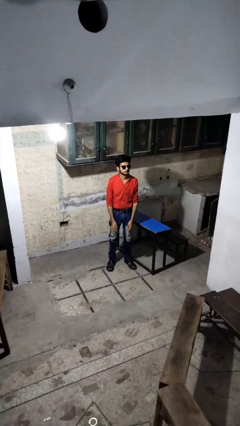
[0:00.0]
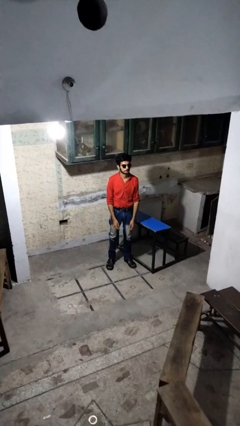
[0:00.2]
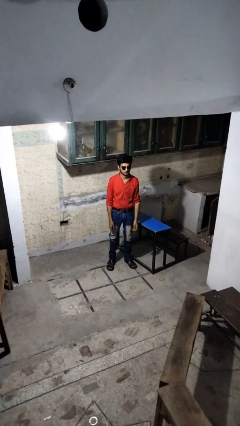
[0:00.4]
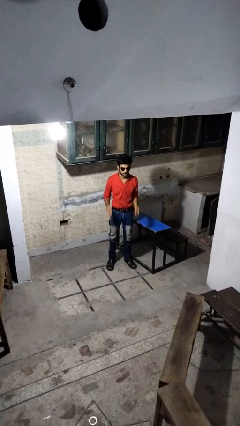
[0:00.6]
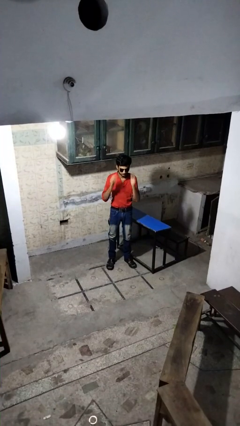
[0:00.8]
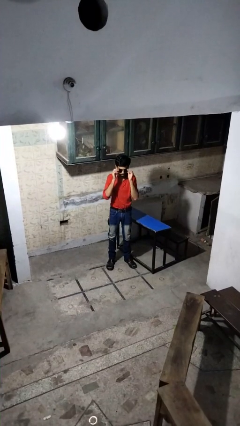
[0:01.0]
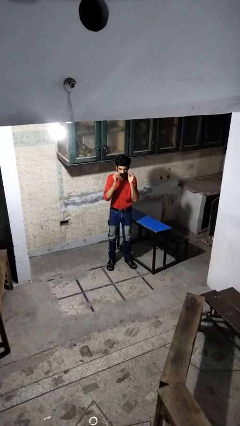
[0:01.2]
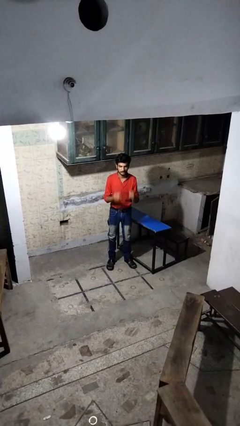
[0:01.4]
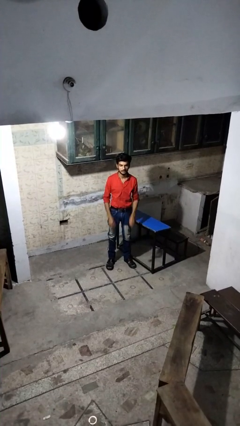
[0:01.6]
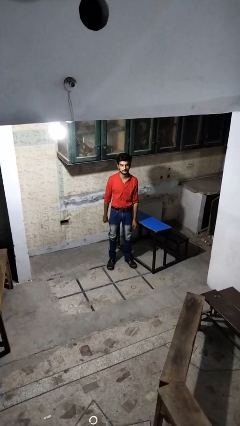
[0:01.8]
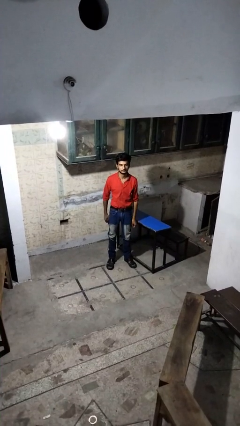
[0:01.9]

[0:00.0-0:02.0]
person takes off sunglasses

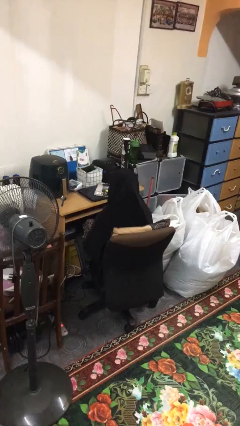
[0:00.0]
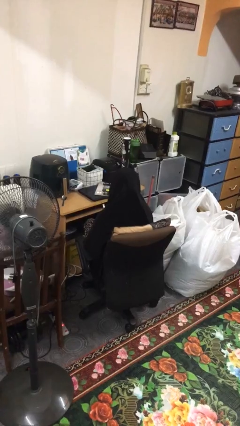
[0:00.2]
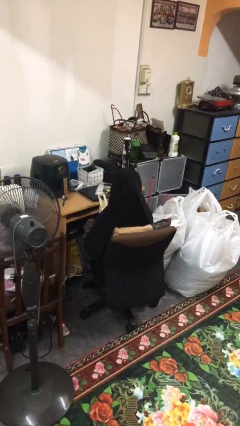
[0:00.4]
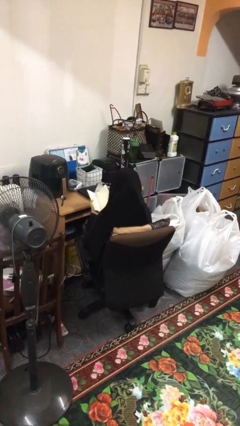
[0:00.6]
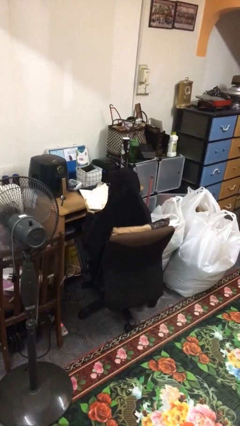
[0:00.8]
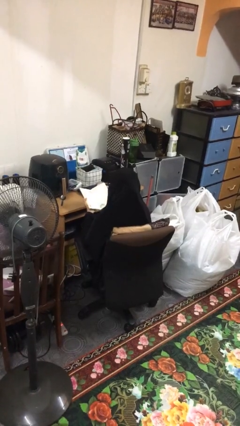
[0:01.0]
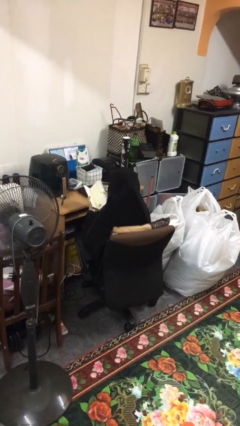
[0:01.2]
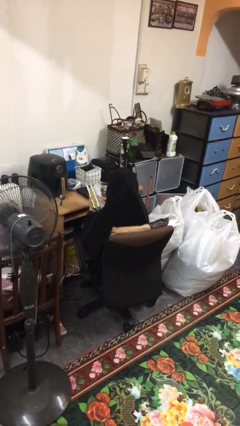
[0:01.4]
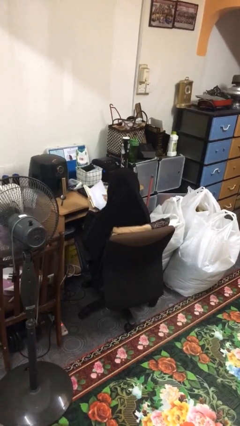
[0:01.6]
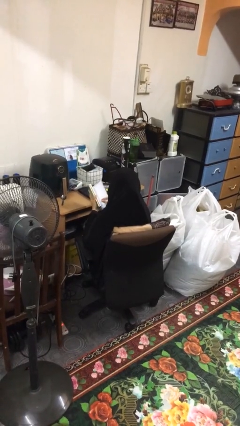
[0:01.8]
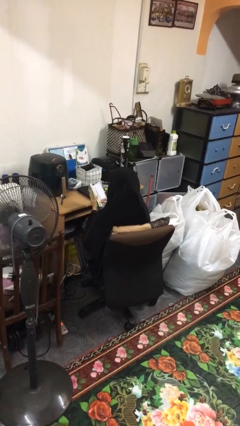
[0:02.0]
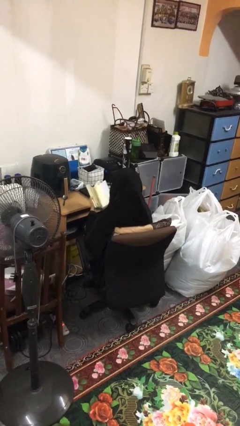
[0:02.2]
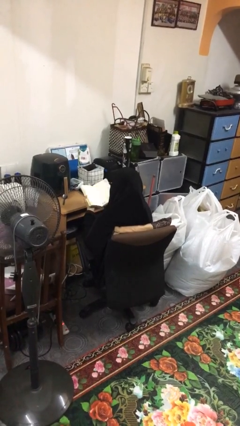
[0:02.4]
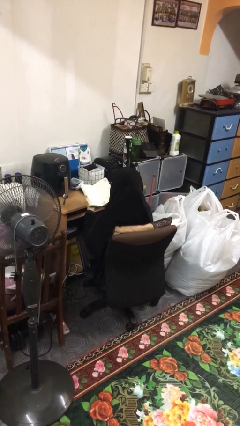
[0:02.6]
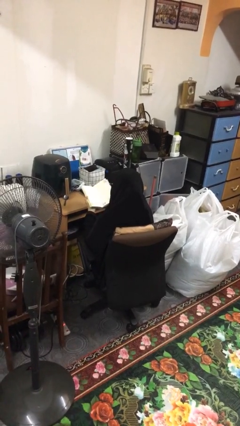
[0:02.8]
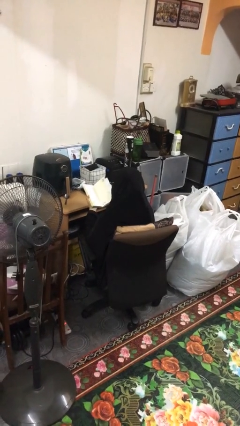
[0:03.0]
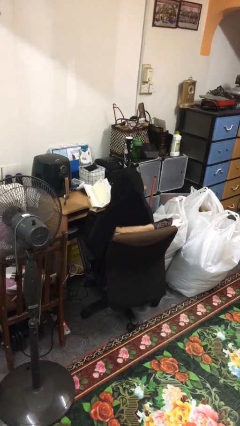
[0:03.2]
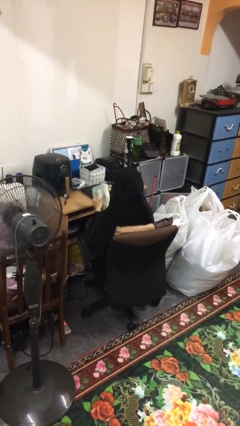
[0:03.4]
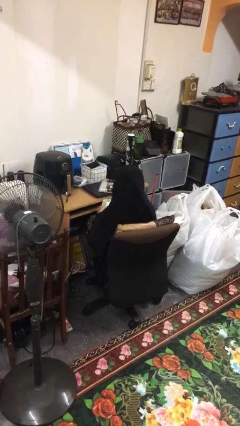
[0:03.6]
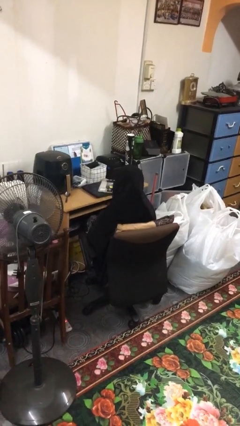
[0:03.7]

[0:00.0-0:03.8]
person reads book

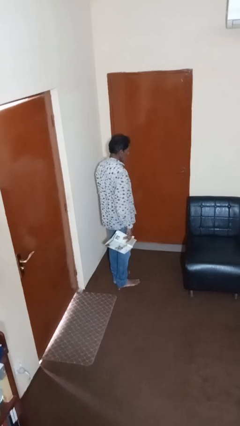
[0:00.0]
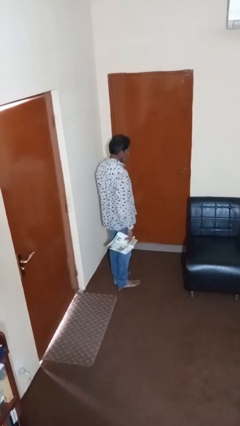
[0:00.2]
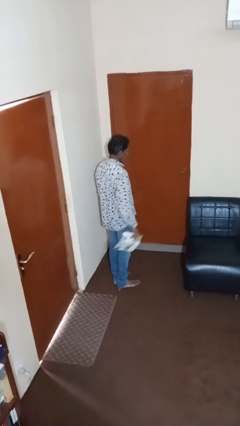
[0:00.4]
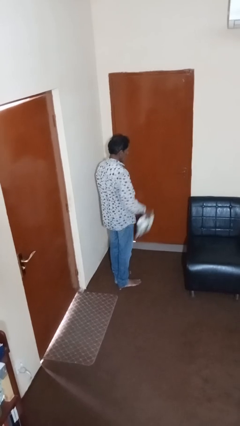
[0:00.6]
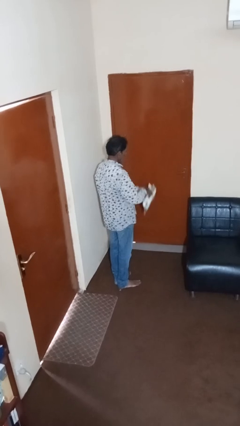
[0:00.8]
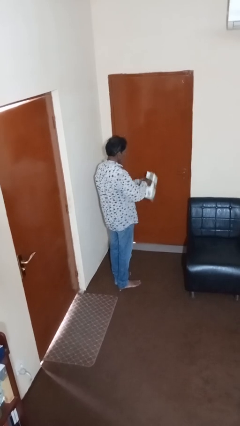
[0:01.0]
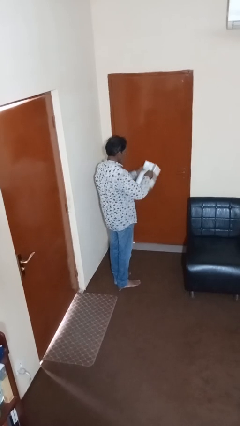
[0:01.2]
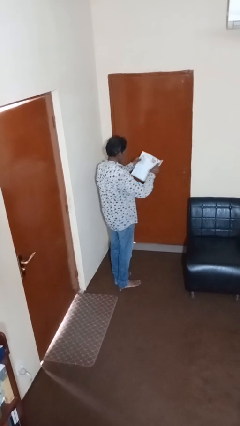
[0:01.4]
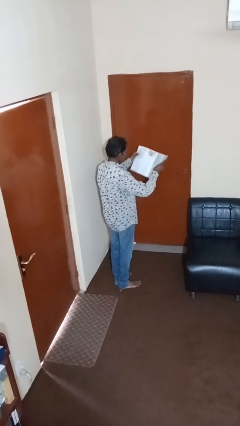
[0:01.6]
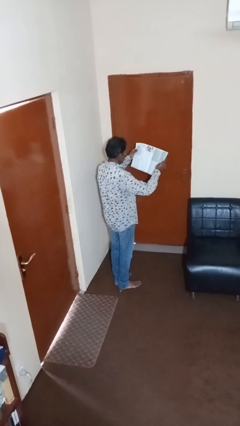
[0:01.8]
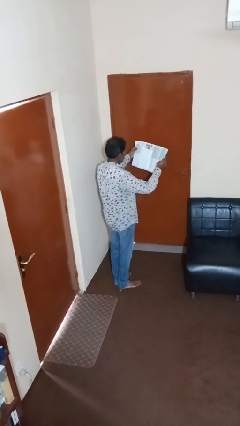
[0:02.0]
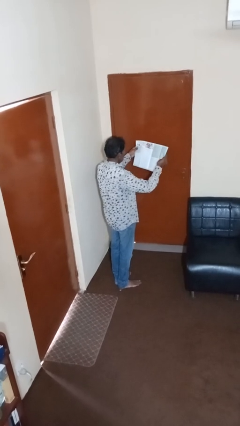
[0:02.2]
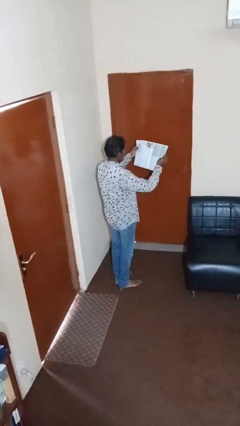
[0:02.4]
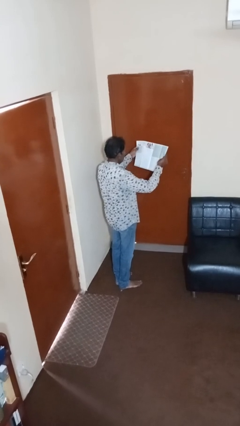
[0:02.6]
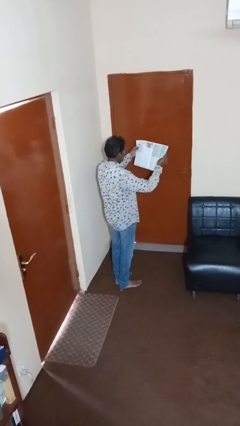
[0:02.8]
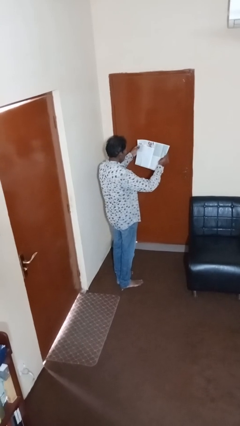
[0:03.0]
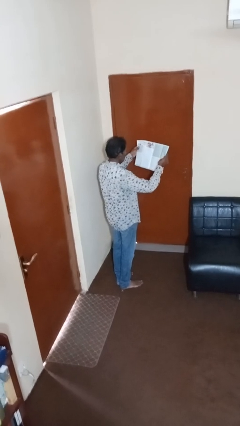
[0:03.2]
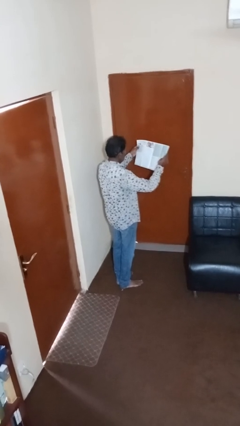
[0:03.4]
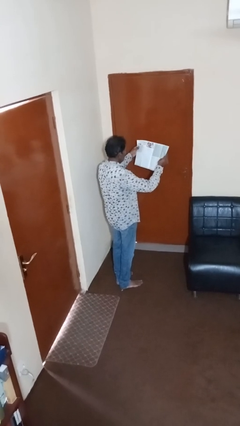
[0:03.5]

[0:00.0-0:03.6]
person reads magazine

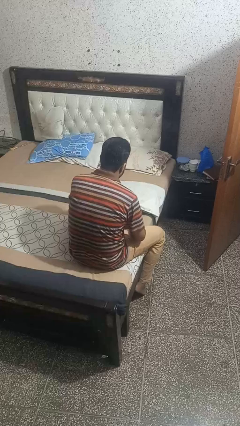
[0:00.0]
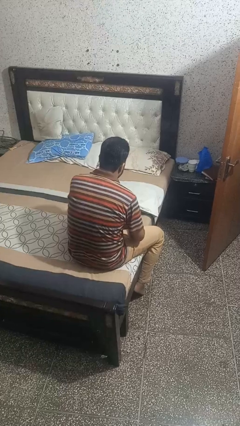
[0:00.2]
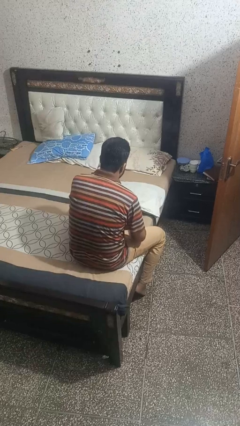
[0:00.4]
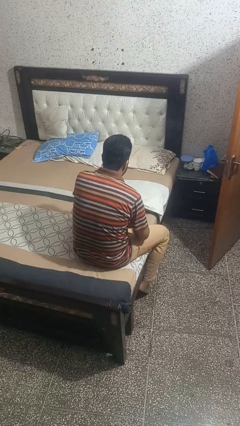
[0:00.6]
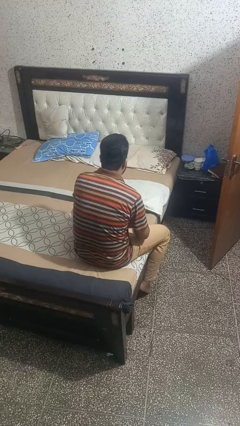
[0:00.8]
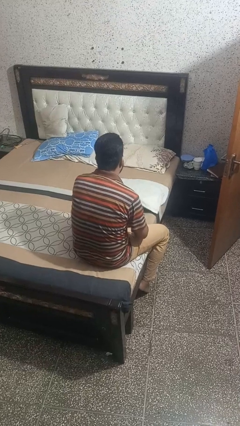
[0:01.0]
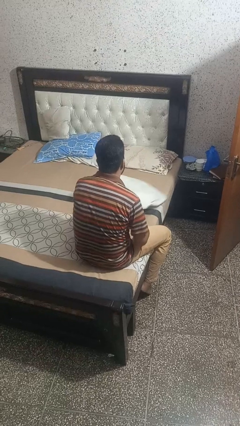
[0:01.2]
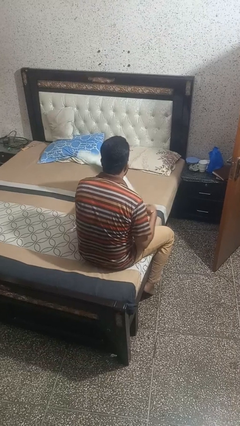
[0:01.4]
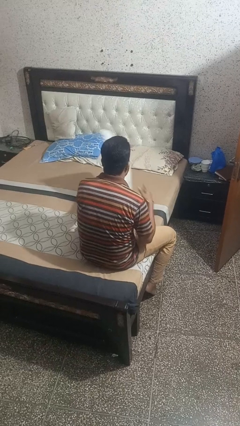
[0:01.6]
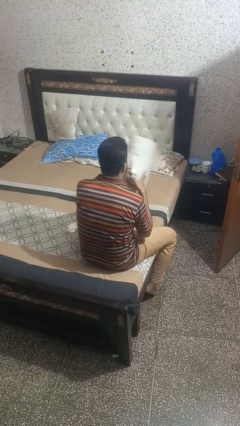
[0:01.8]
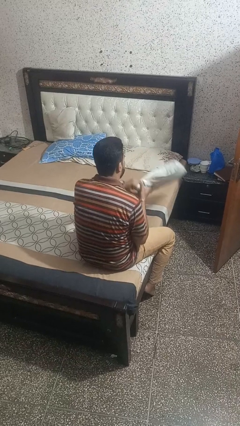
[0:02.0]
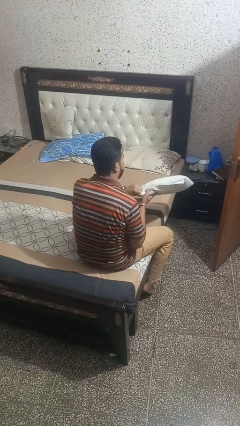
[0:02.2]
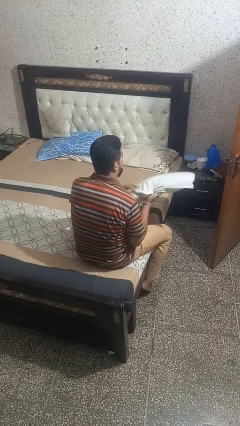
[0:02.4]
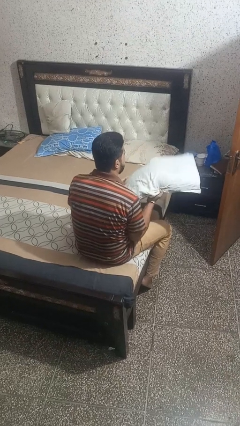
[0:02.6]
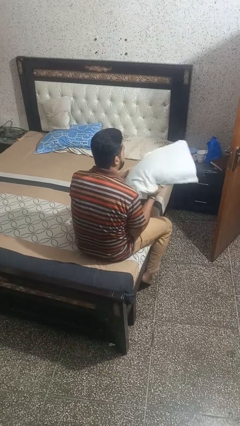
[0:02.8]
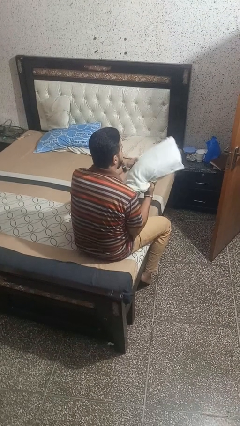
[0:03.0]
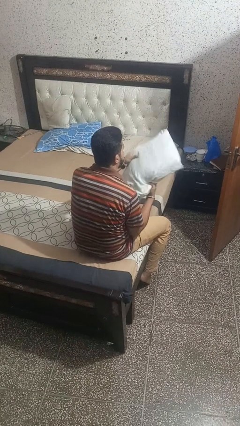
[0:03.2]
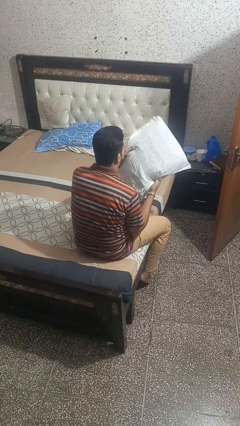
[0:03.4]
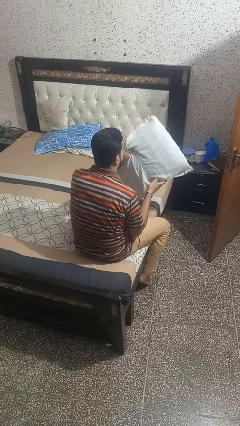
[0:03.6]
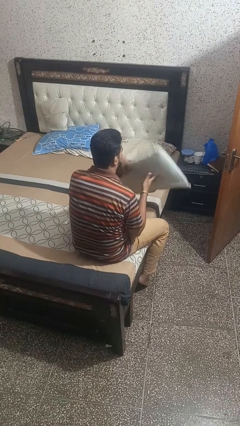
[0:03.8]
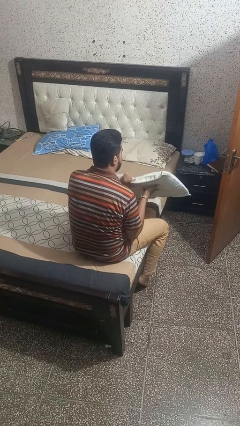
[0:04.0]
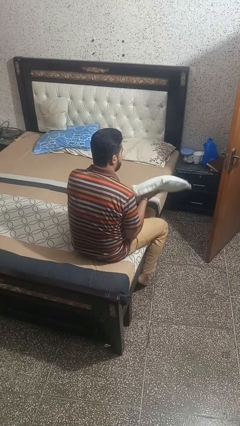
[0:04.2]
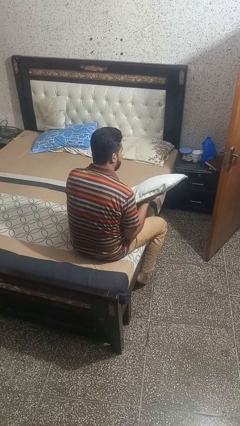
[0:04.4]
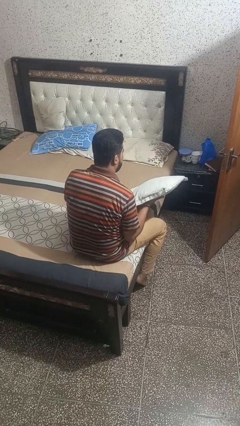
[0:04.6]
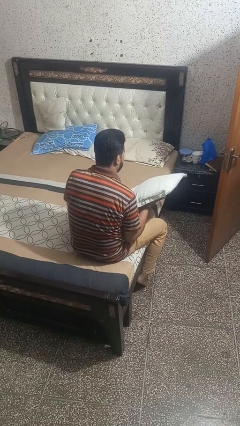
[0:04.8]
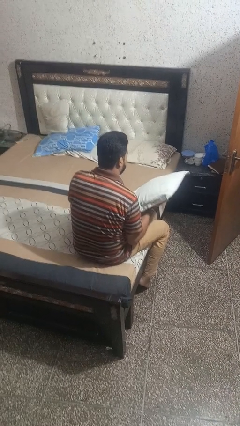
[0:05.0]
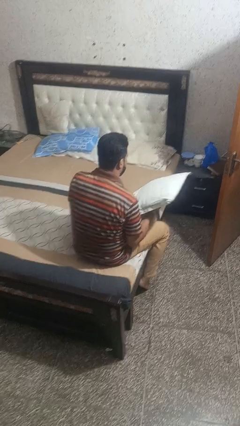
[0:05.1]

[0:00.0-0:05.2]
person picks up object from bed

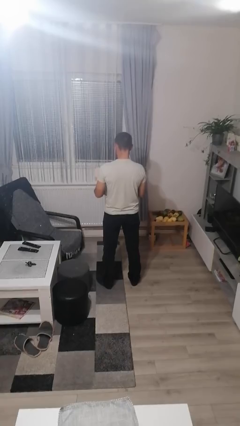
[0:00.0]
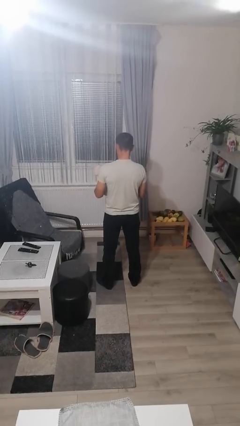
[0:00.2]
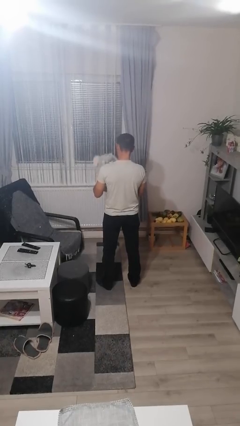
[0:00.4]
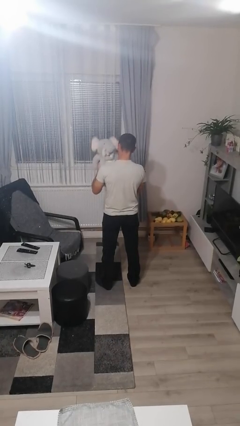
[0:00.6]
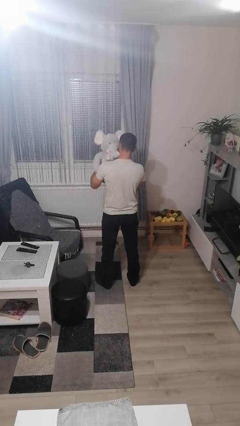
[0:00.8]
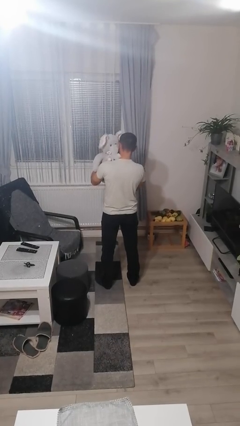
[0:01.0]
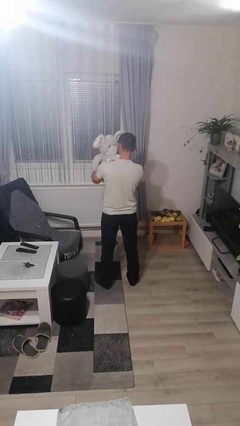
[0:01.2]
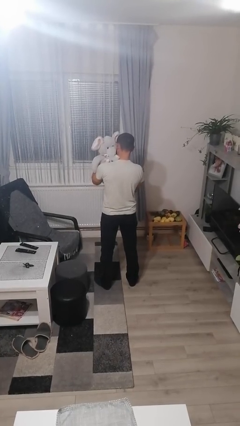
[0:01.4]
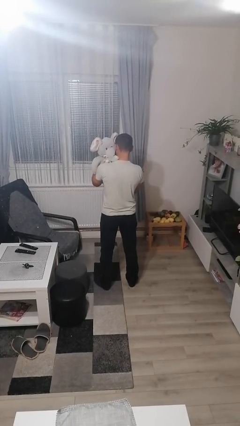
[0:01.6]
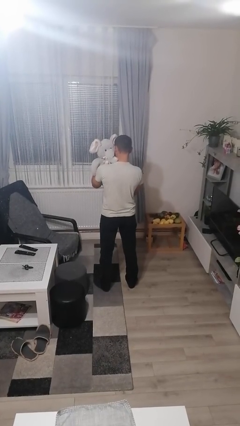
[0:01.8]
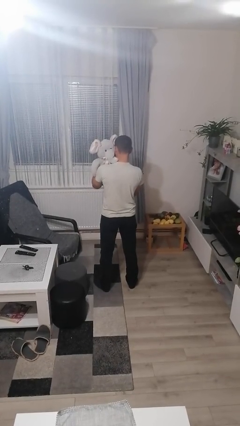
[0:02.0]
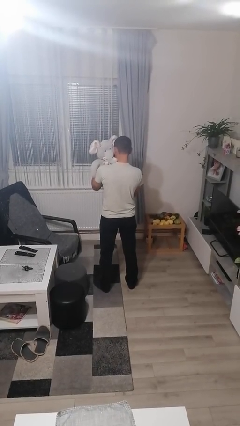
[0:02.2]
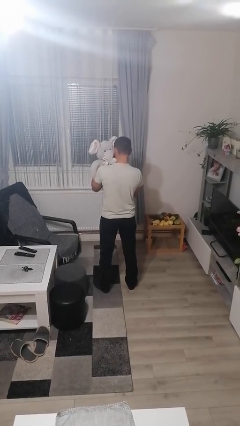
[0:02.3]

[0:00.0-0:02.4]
person hugs stuffed animal
